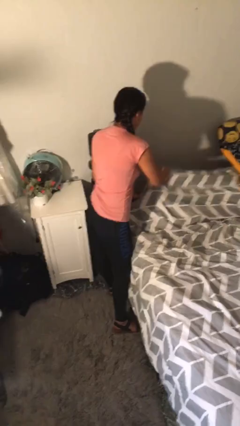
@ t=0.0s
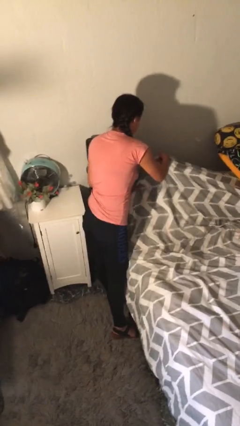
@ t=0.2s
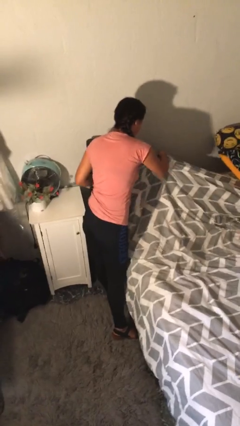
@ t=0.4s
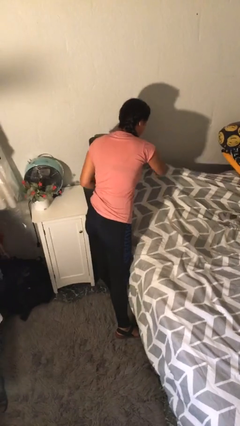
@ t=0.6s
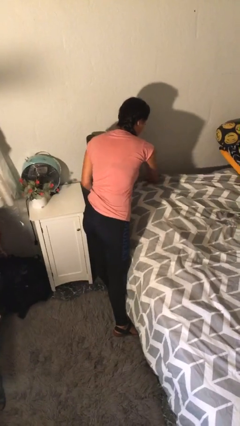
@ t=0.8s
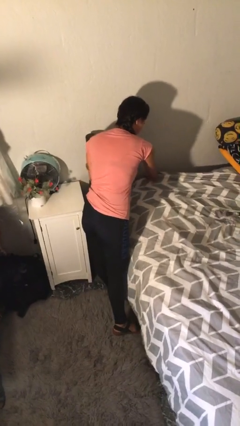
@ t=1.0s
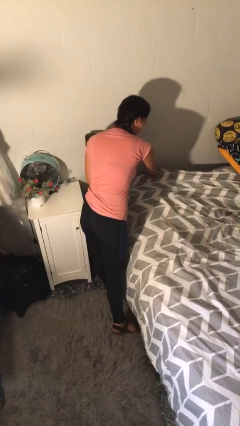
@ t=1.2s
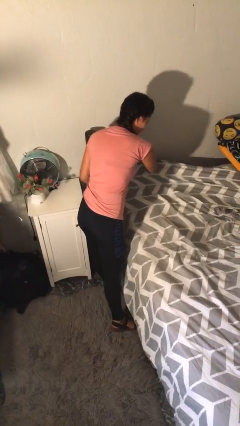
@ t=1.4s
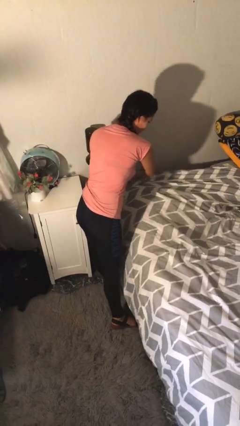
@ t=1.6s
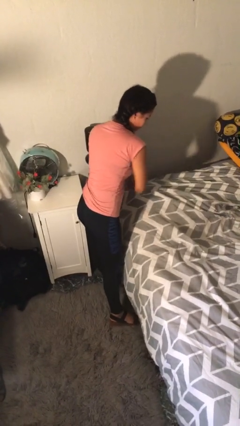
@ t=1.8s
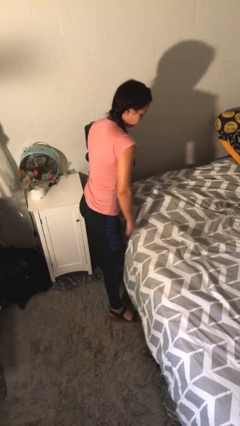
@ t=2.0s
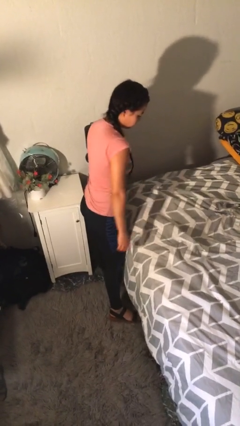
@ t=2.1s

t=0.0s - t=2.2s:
person makes bed

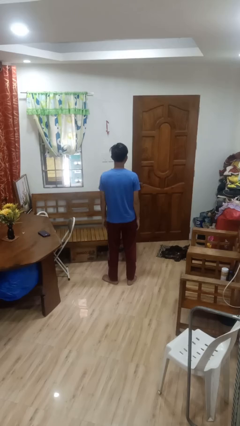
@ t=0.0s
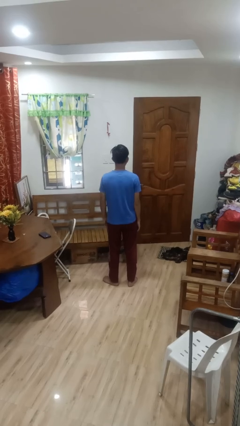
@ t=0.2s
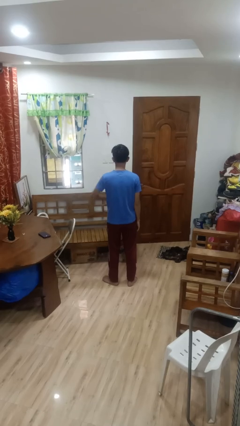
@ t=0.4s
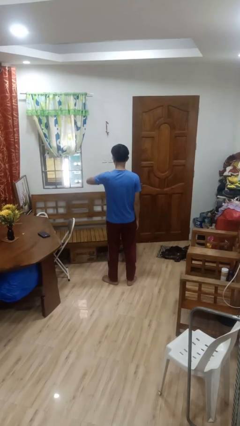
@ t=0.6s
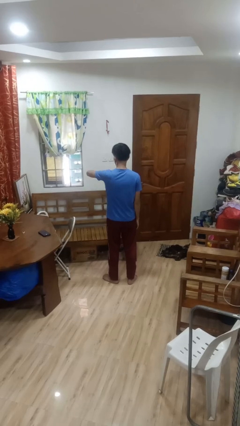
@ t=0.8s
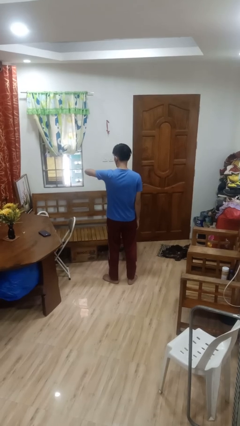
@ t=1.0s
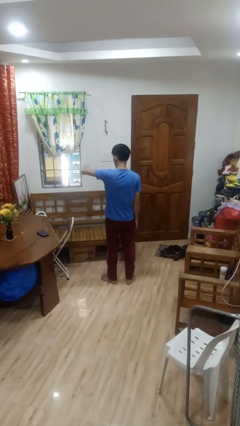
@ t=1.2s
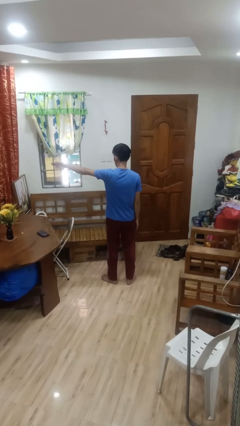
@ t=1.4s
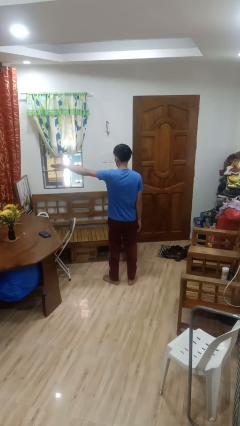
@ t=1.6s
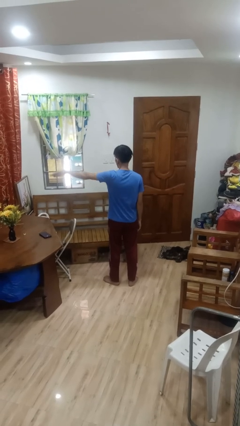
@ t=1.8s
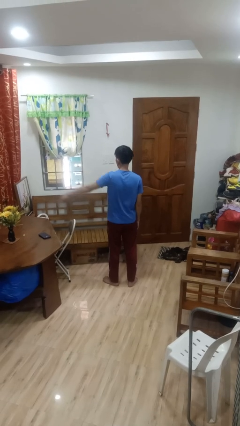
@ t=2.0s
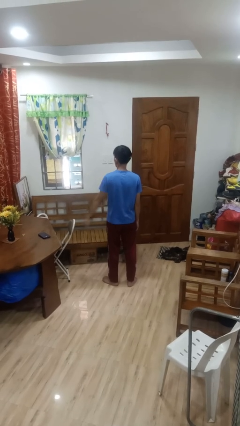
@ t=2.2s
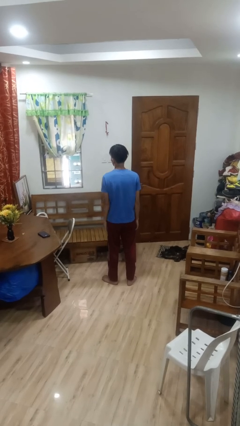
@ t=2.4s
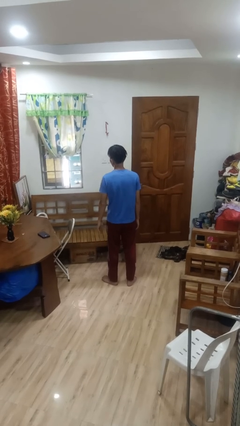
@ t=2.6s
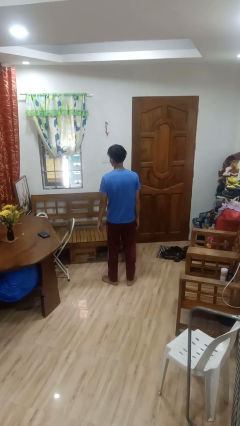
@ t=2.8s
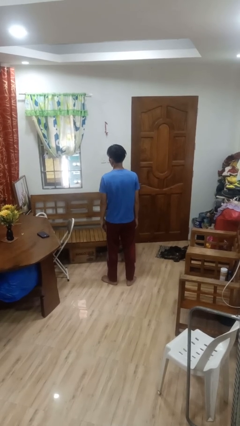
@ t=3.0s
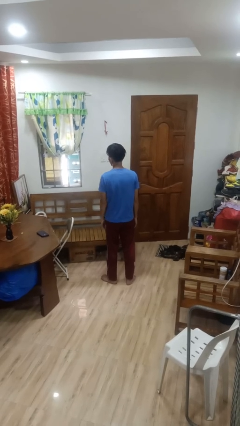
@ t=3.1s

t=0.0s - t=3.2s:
person gestures swipe left

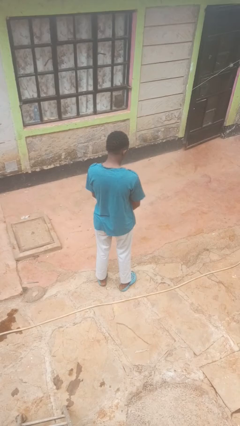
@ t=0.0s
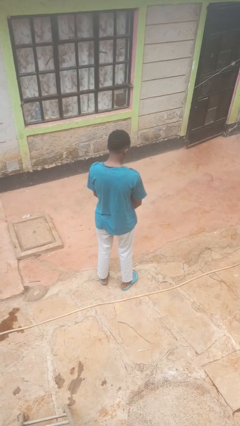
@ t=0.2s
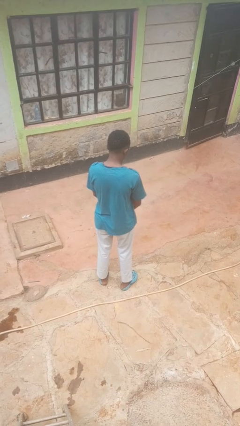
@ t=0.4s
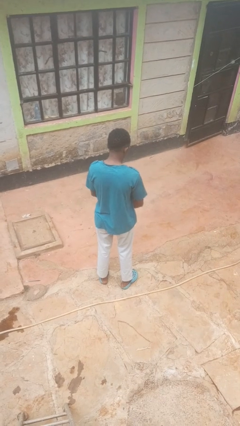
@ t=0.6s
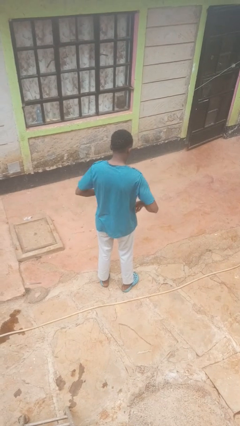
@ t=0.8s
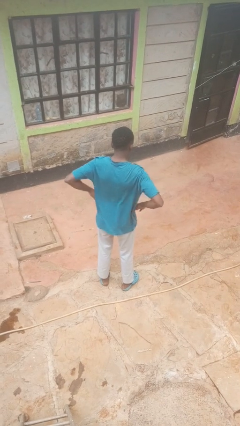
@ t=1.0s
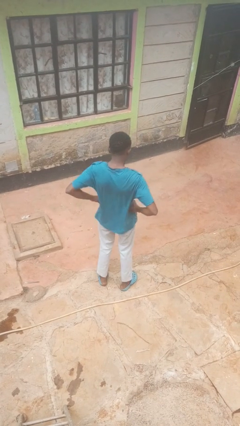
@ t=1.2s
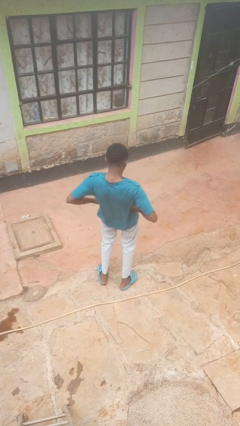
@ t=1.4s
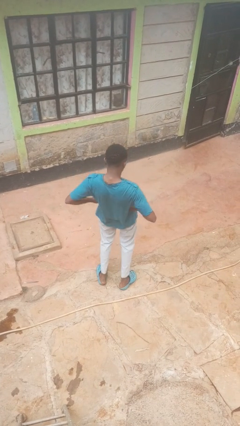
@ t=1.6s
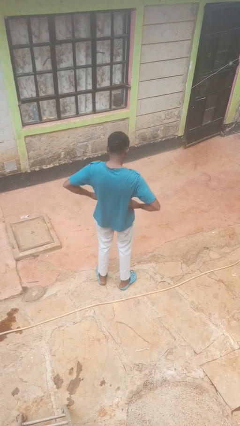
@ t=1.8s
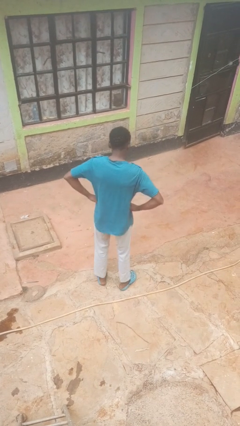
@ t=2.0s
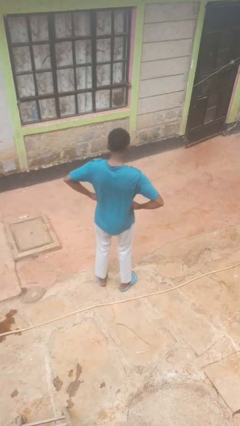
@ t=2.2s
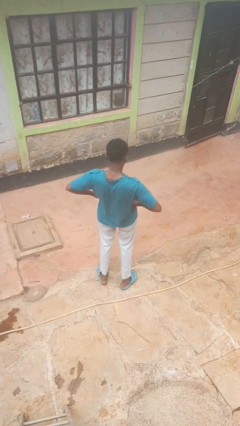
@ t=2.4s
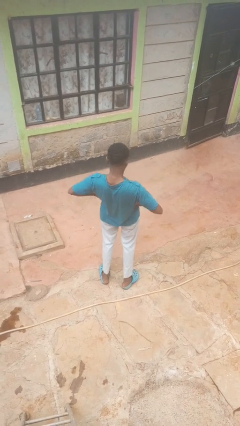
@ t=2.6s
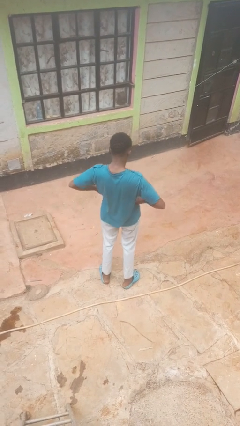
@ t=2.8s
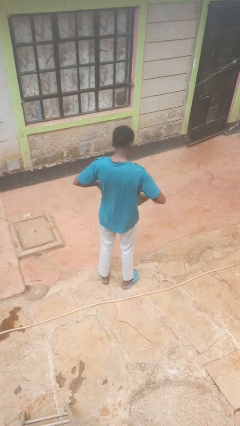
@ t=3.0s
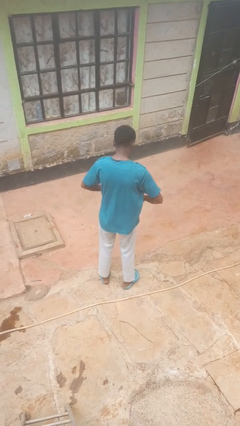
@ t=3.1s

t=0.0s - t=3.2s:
person wiggles hips

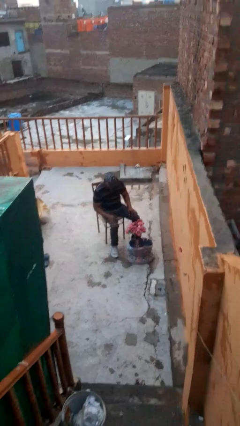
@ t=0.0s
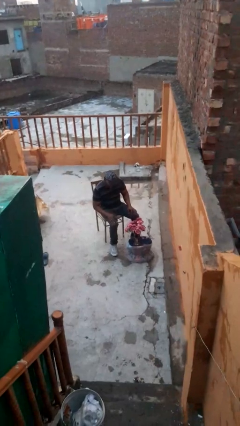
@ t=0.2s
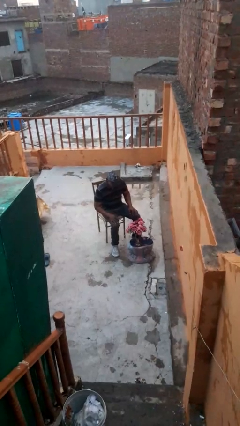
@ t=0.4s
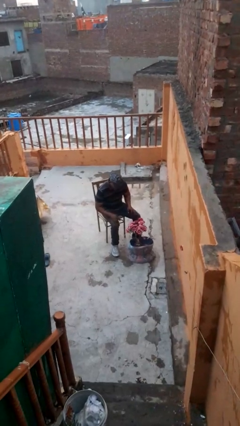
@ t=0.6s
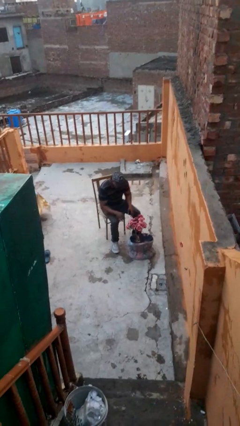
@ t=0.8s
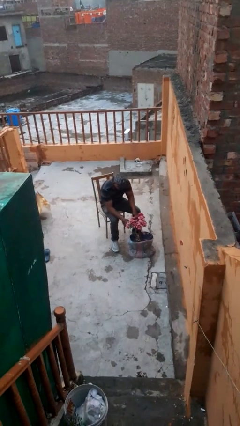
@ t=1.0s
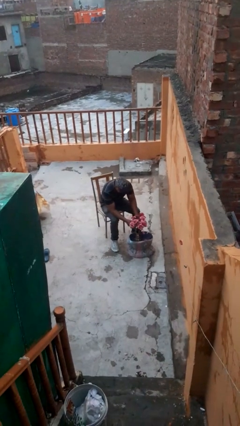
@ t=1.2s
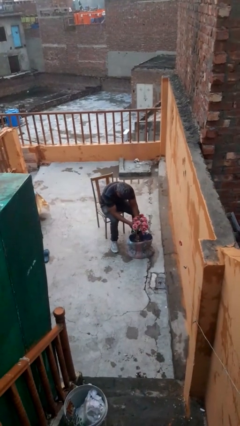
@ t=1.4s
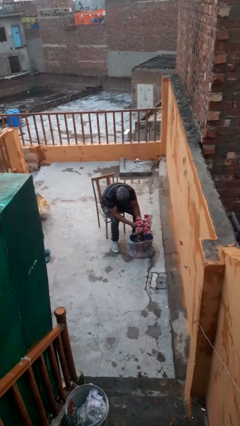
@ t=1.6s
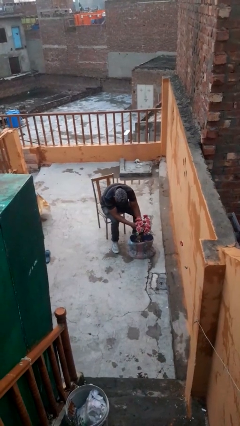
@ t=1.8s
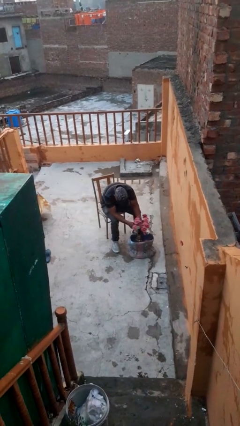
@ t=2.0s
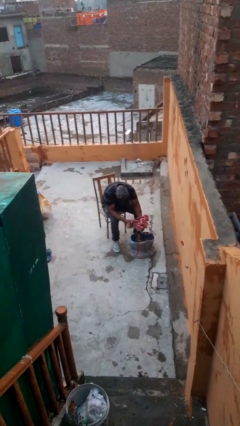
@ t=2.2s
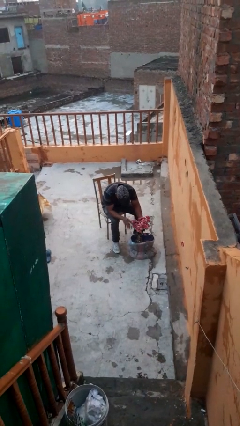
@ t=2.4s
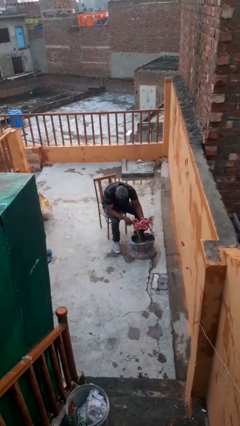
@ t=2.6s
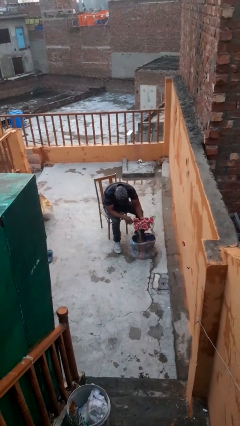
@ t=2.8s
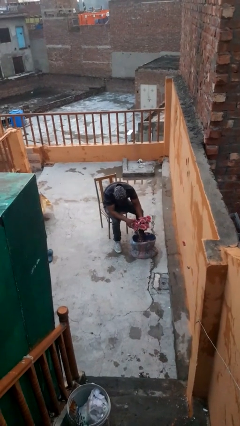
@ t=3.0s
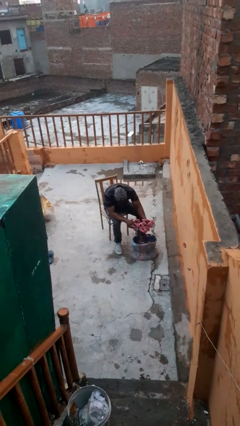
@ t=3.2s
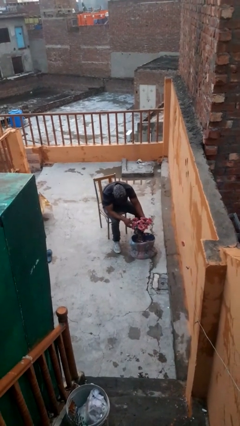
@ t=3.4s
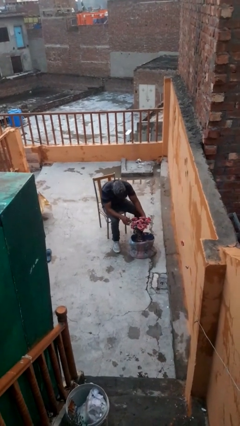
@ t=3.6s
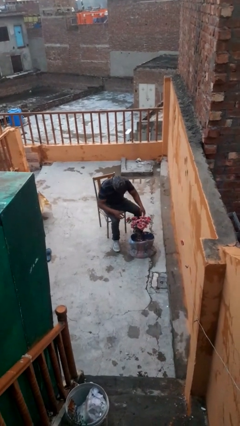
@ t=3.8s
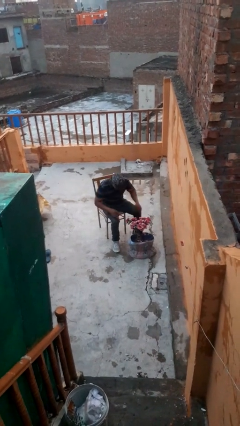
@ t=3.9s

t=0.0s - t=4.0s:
person arranges flowers in vase

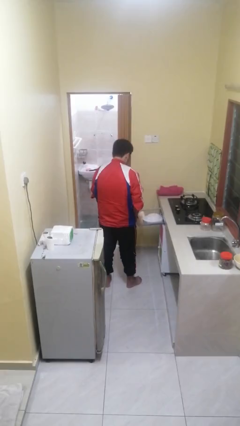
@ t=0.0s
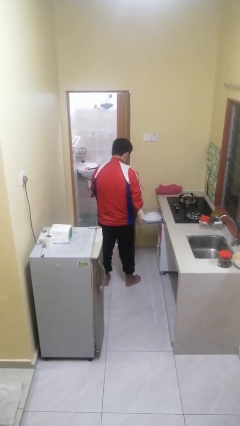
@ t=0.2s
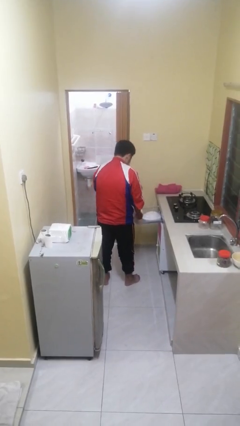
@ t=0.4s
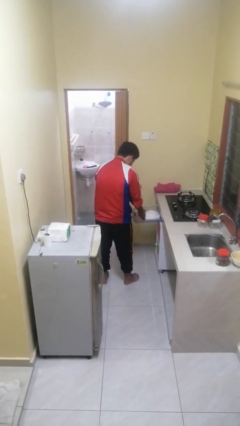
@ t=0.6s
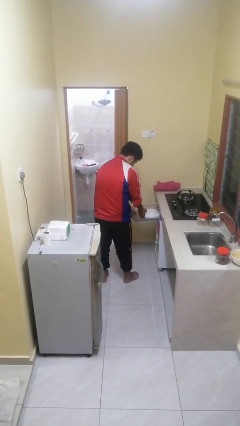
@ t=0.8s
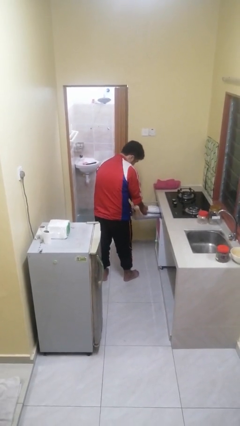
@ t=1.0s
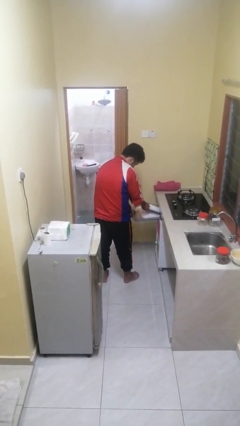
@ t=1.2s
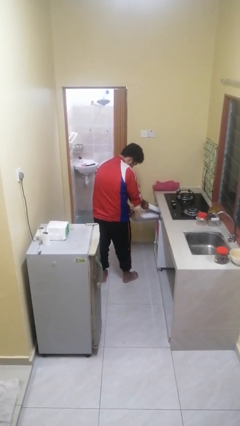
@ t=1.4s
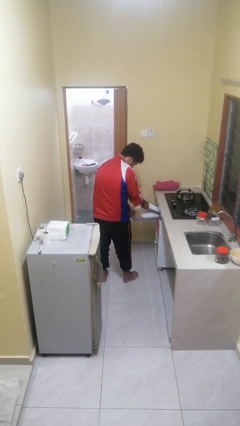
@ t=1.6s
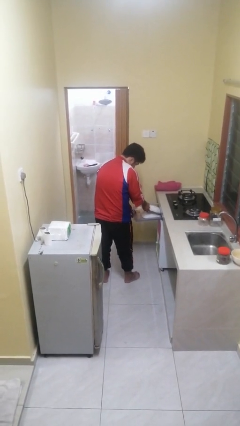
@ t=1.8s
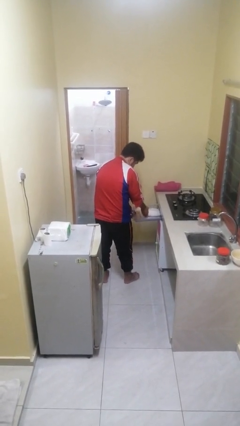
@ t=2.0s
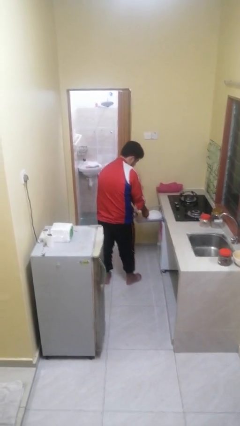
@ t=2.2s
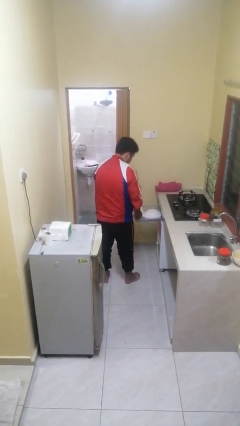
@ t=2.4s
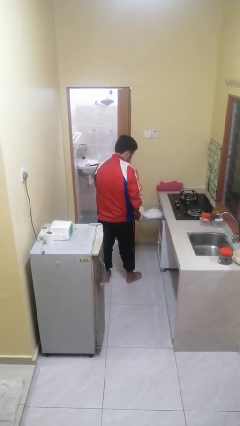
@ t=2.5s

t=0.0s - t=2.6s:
person searches in kitchen drawer

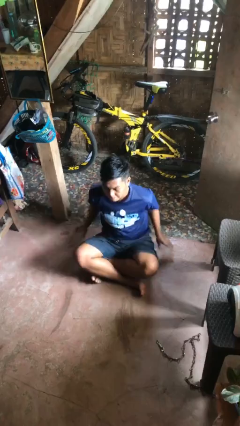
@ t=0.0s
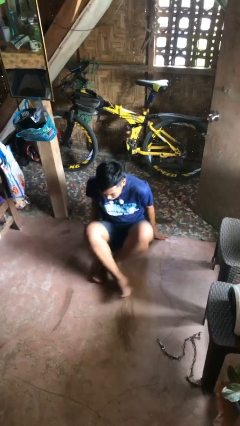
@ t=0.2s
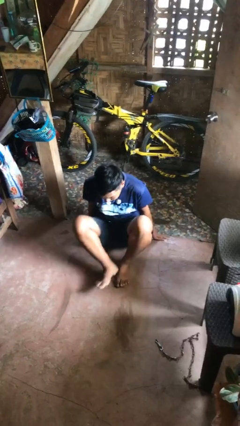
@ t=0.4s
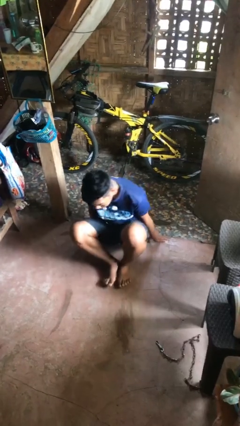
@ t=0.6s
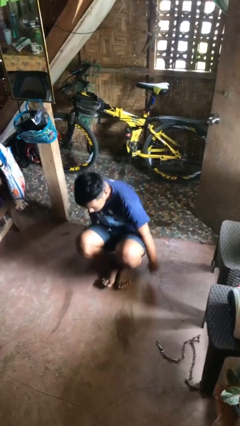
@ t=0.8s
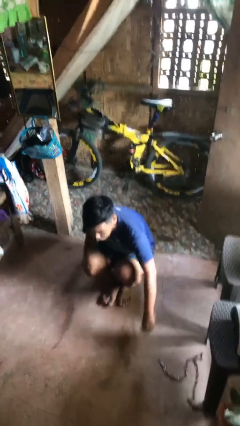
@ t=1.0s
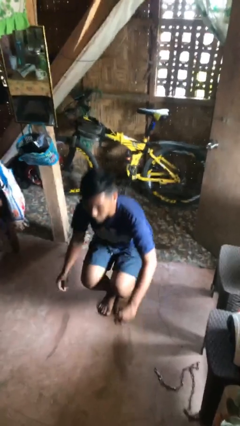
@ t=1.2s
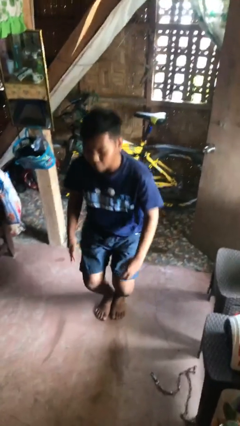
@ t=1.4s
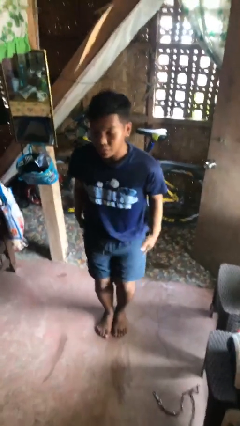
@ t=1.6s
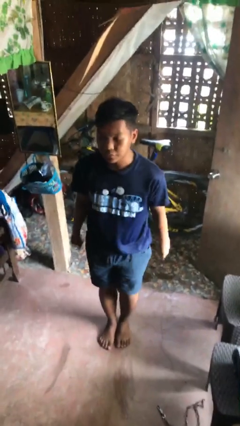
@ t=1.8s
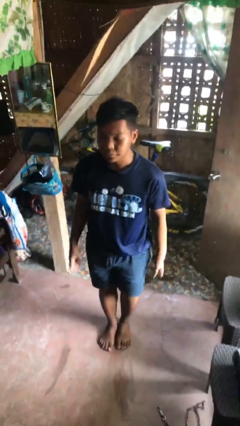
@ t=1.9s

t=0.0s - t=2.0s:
person stands up from floor

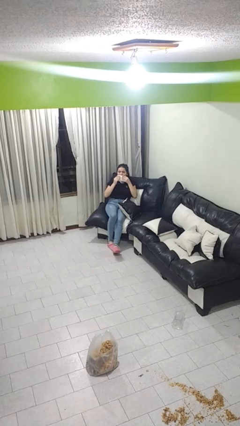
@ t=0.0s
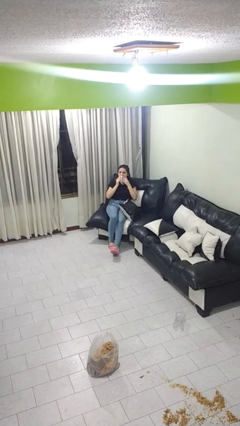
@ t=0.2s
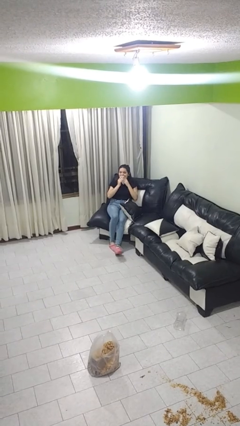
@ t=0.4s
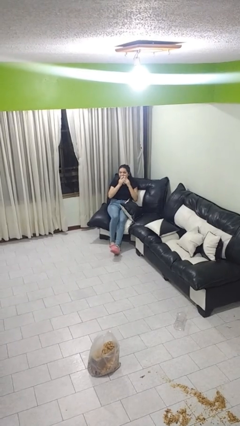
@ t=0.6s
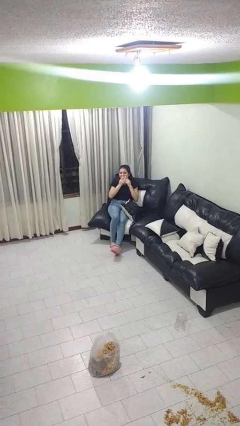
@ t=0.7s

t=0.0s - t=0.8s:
person wipes mouth with napkin
